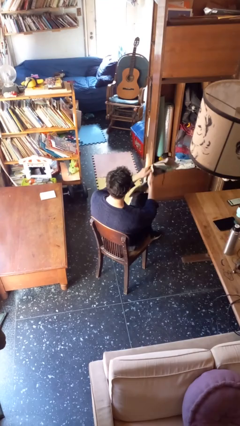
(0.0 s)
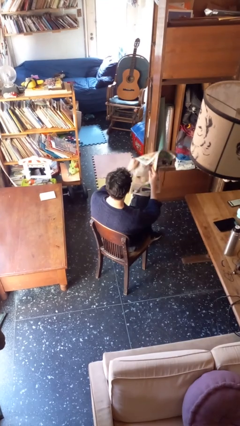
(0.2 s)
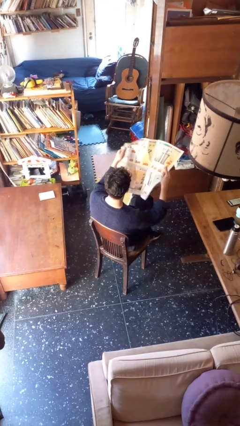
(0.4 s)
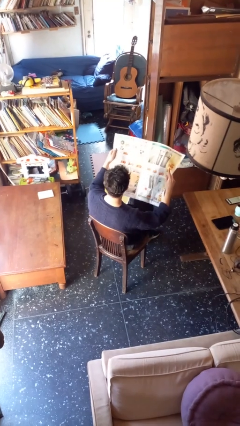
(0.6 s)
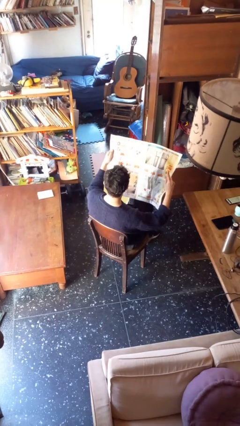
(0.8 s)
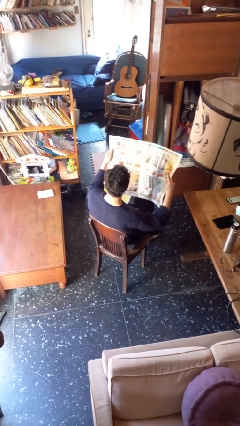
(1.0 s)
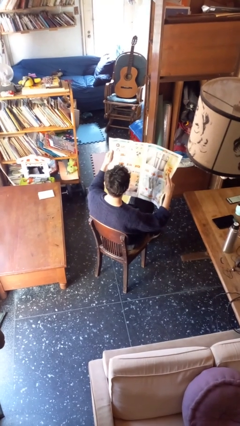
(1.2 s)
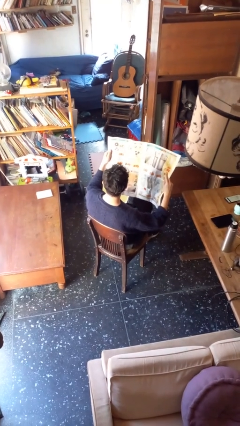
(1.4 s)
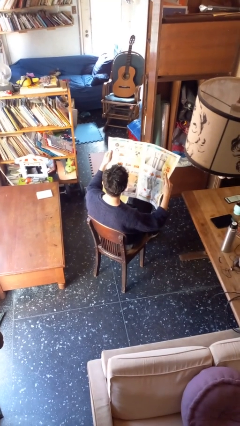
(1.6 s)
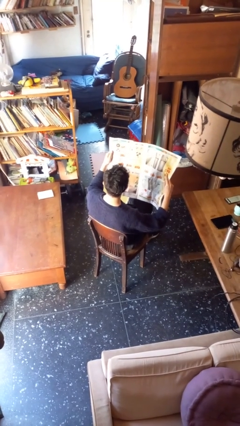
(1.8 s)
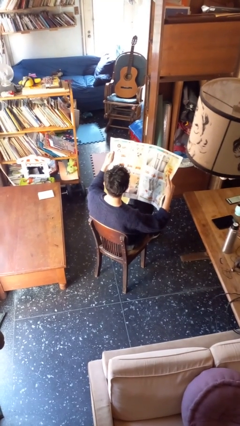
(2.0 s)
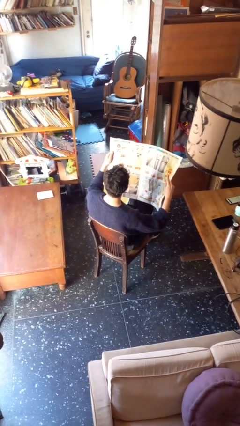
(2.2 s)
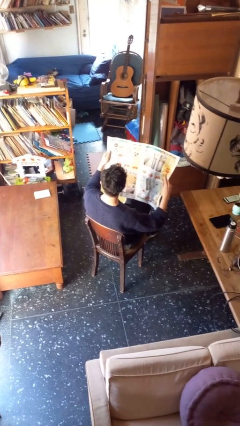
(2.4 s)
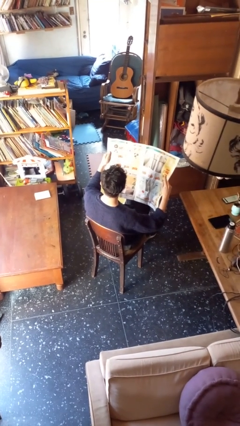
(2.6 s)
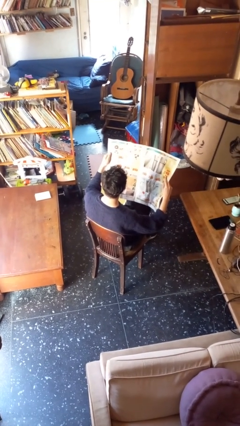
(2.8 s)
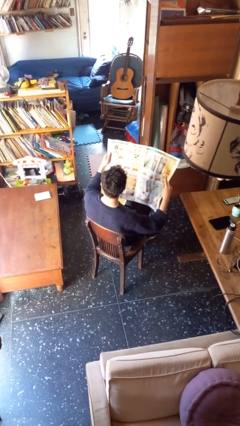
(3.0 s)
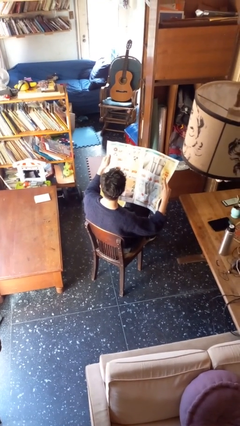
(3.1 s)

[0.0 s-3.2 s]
person reads newspaper

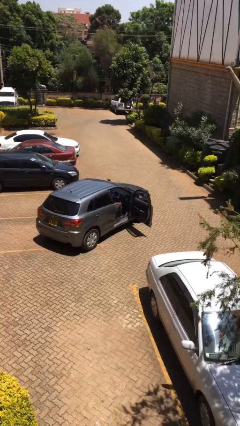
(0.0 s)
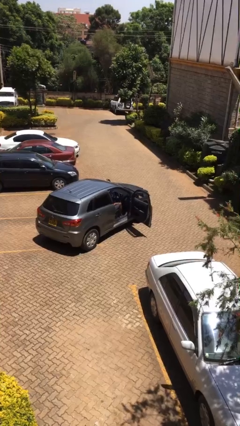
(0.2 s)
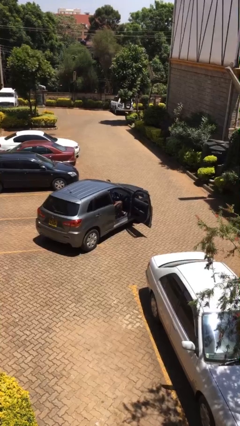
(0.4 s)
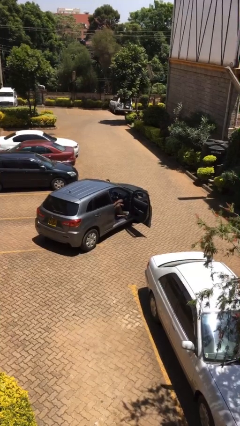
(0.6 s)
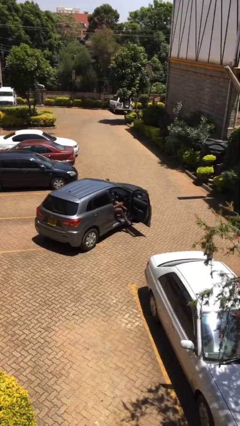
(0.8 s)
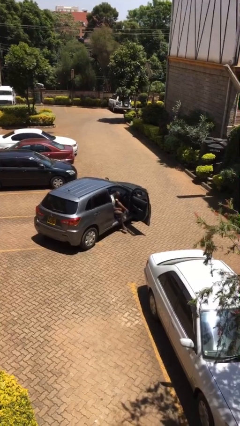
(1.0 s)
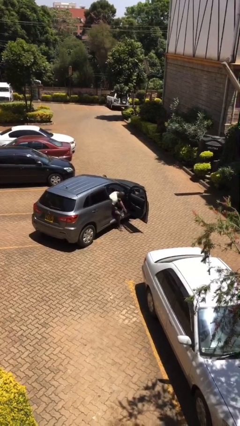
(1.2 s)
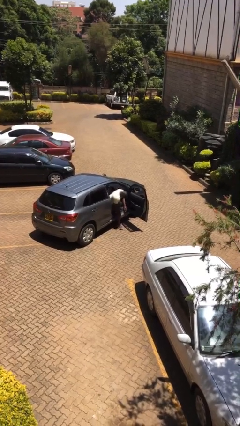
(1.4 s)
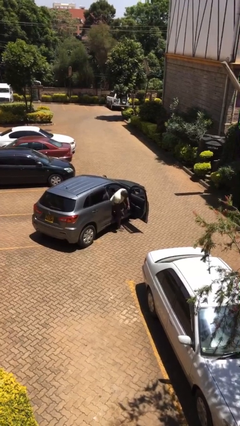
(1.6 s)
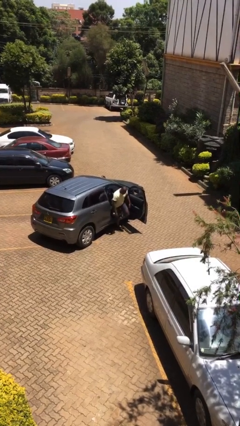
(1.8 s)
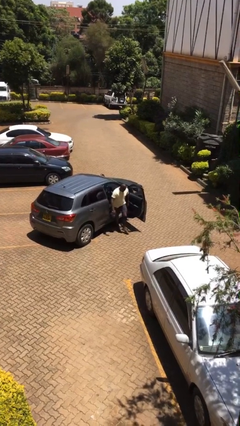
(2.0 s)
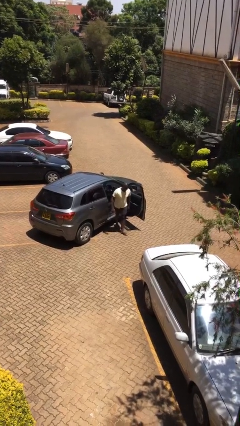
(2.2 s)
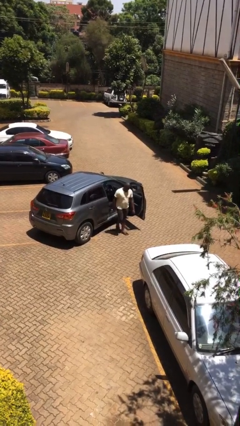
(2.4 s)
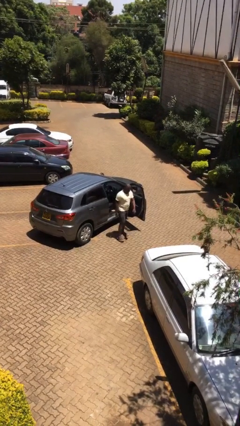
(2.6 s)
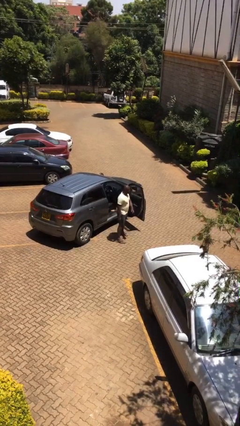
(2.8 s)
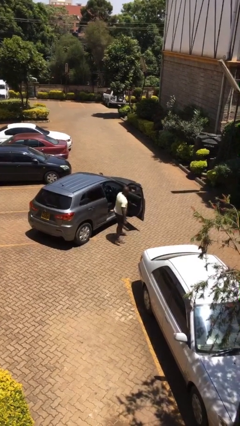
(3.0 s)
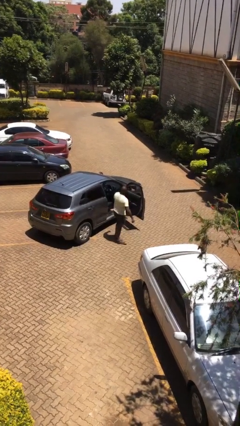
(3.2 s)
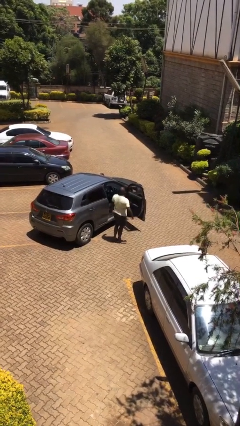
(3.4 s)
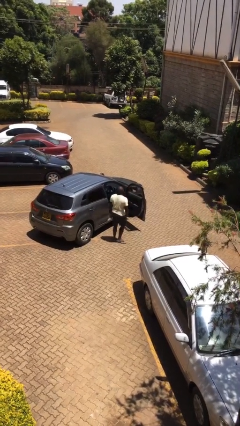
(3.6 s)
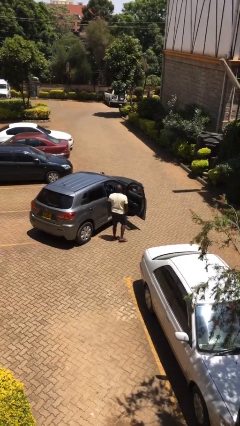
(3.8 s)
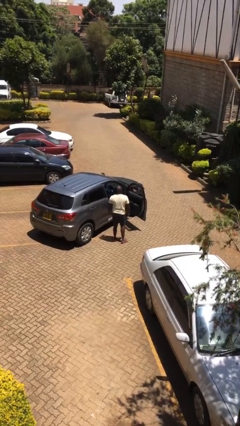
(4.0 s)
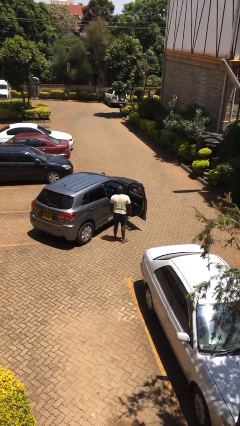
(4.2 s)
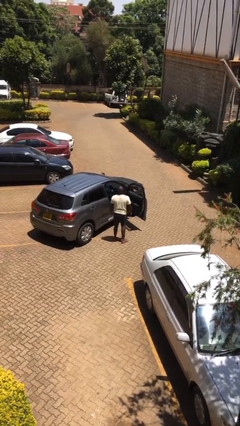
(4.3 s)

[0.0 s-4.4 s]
person exits car

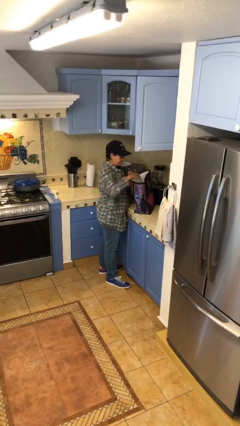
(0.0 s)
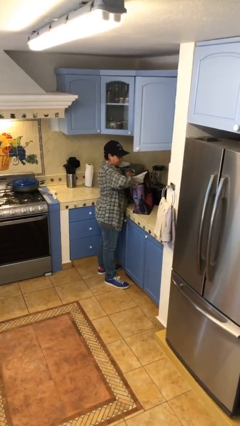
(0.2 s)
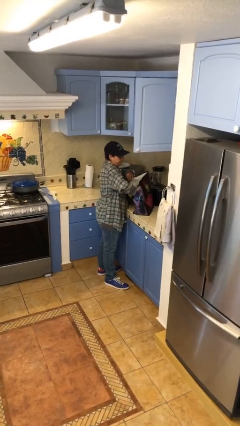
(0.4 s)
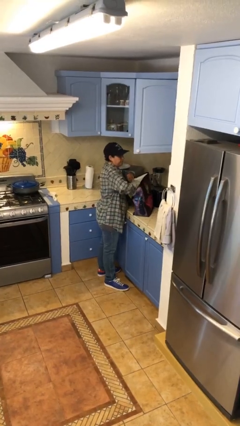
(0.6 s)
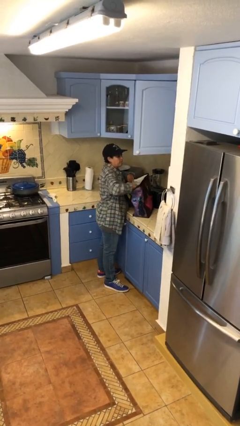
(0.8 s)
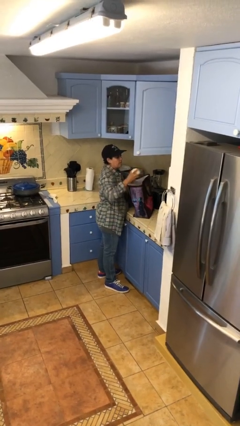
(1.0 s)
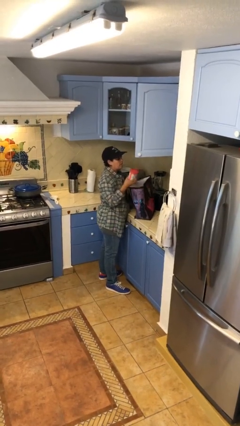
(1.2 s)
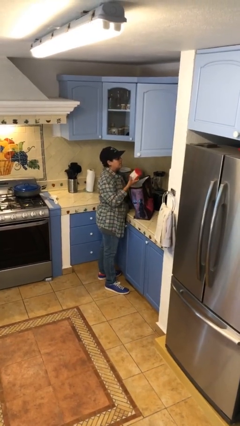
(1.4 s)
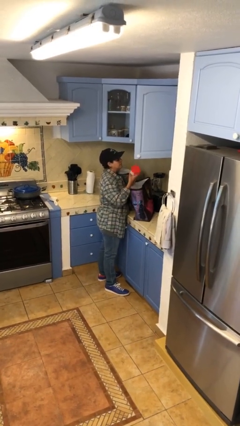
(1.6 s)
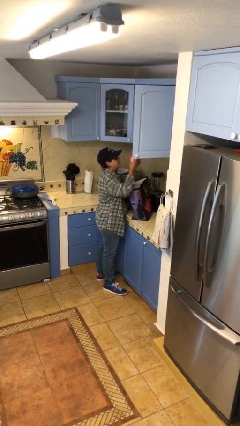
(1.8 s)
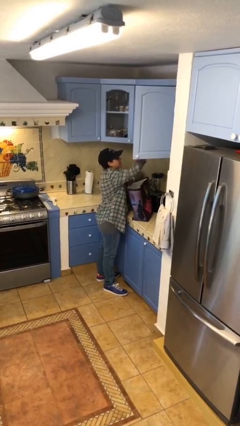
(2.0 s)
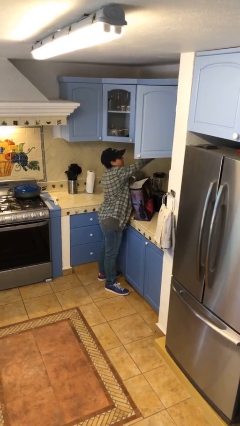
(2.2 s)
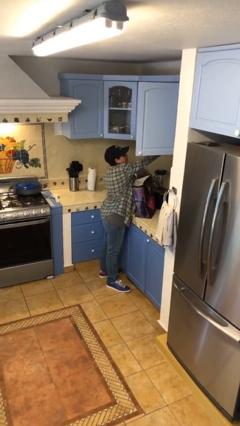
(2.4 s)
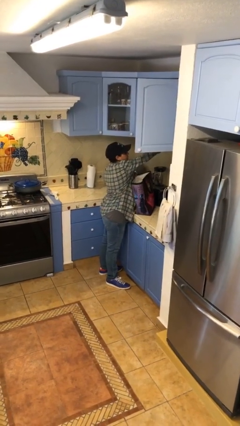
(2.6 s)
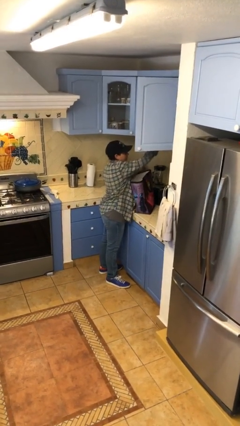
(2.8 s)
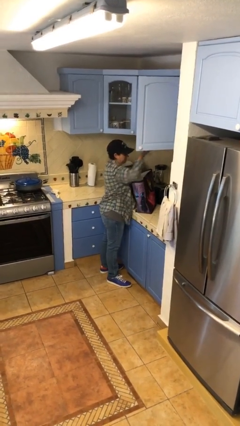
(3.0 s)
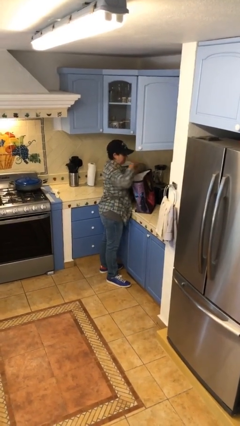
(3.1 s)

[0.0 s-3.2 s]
person loads groceries into cabinet

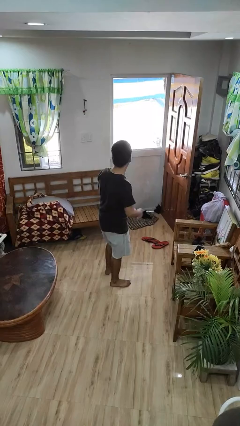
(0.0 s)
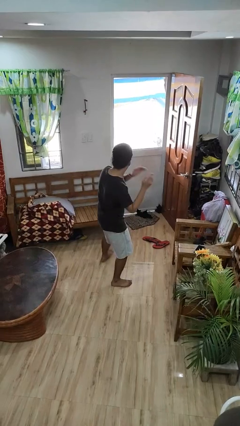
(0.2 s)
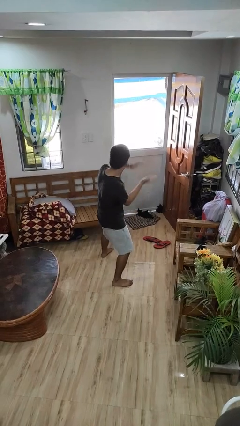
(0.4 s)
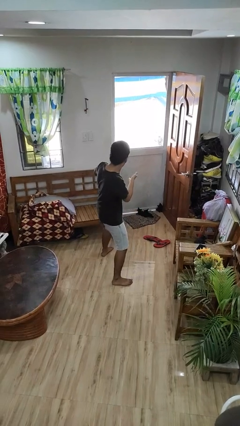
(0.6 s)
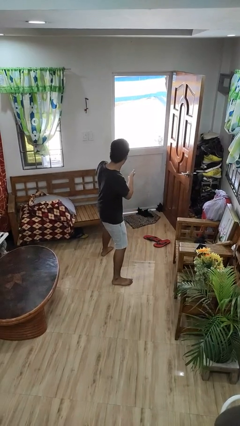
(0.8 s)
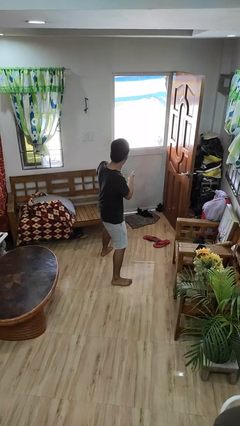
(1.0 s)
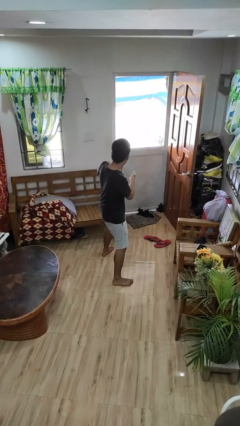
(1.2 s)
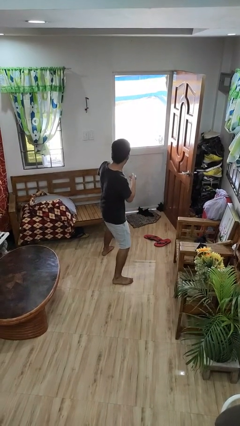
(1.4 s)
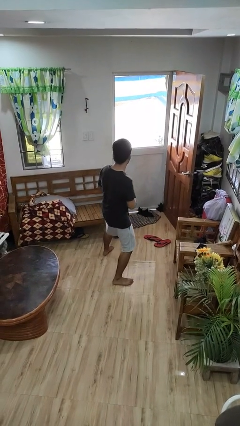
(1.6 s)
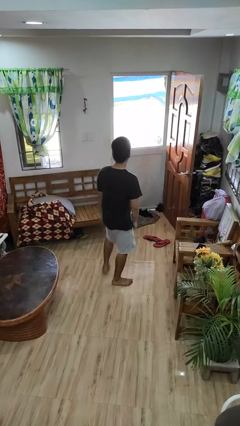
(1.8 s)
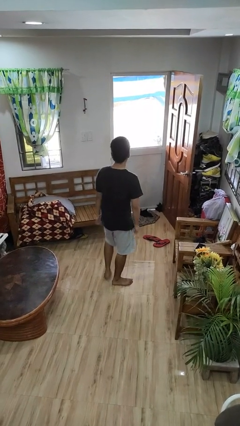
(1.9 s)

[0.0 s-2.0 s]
person karate chop

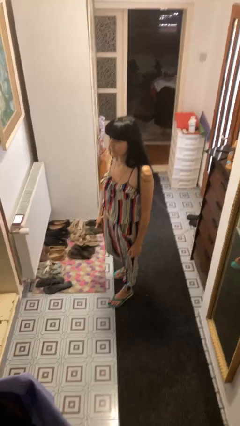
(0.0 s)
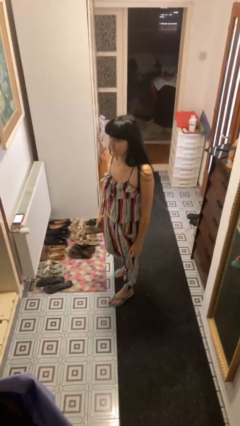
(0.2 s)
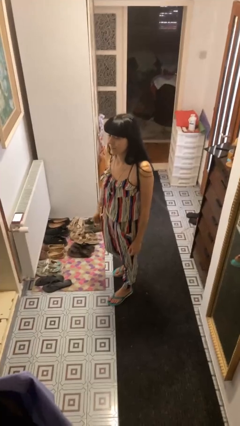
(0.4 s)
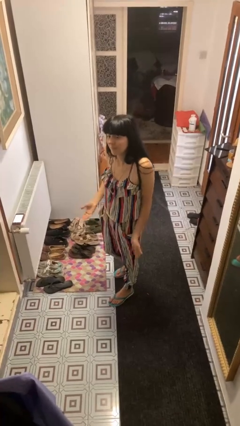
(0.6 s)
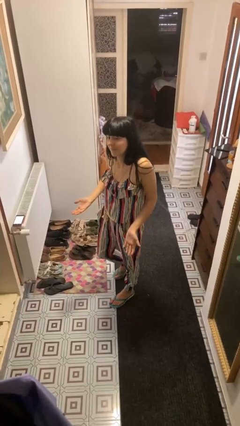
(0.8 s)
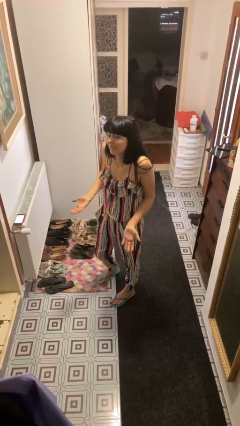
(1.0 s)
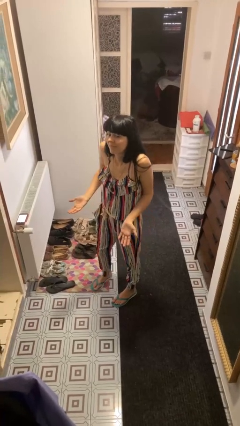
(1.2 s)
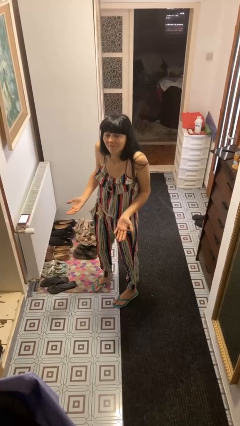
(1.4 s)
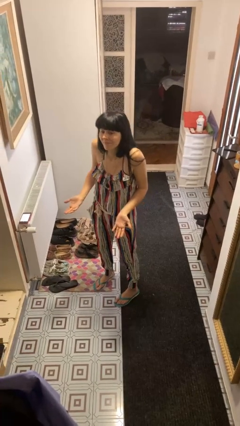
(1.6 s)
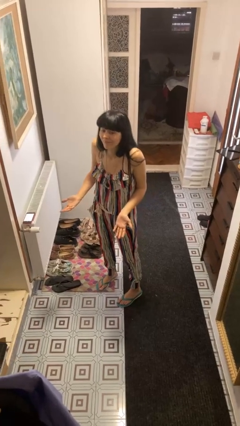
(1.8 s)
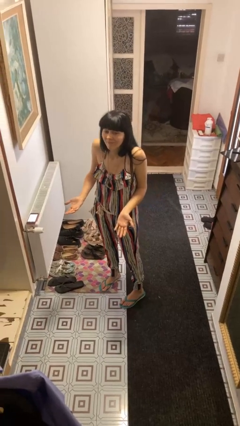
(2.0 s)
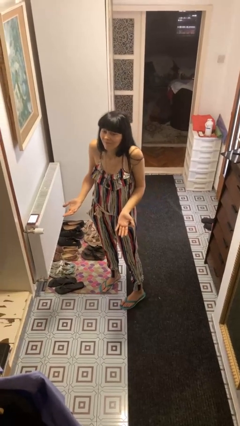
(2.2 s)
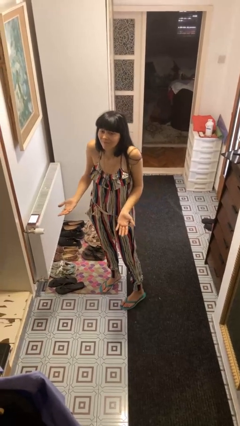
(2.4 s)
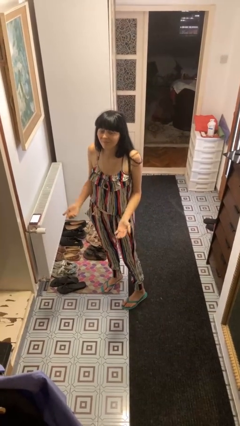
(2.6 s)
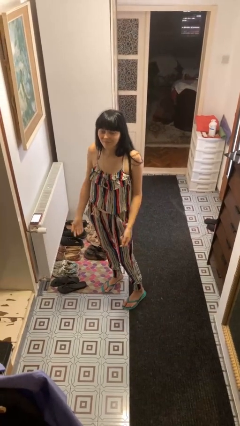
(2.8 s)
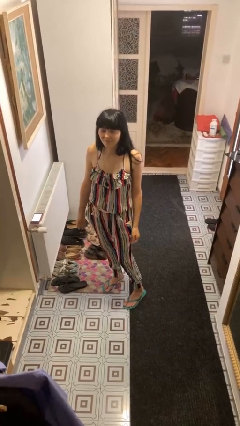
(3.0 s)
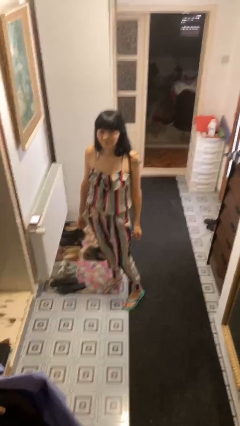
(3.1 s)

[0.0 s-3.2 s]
person shrugs

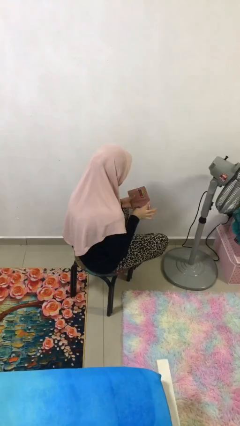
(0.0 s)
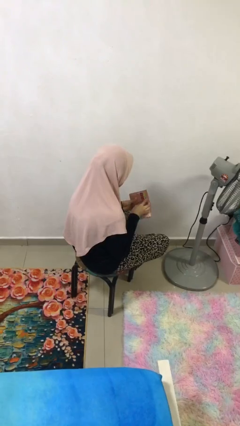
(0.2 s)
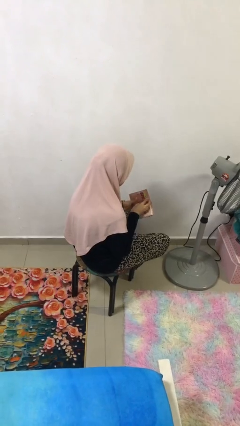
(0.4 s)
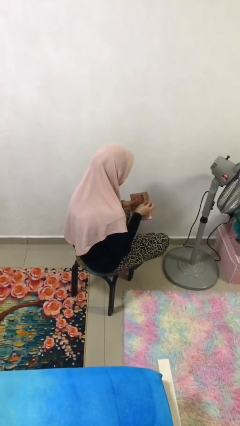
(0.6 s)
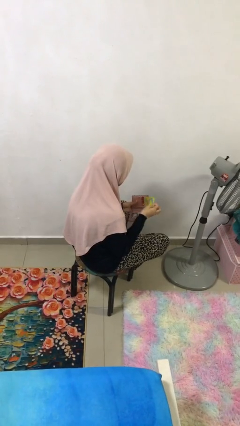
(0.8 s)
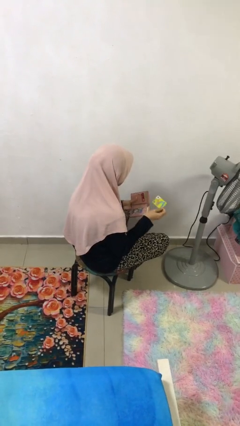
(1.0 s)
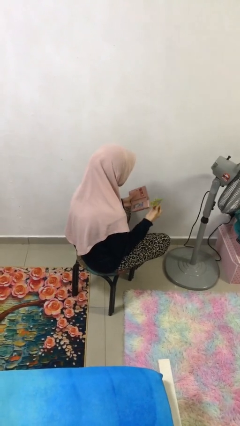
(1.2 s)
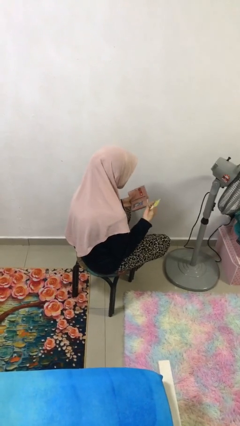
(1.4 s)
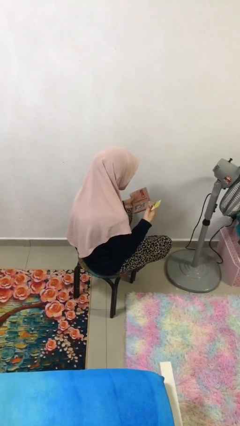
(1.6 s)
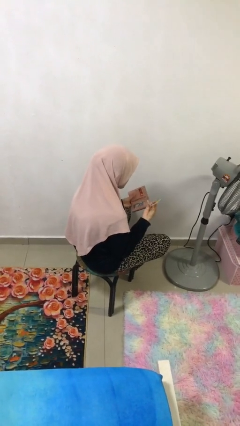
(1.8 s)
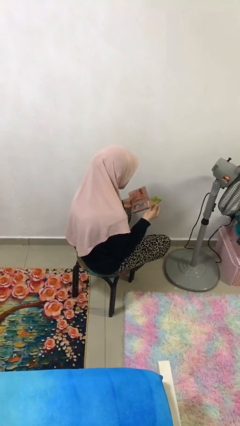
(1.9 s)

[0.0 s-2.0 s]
person takes object from purse
